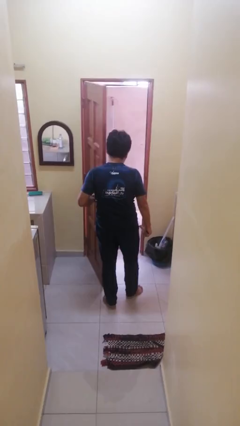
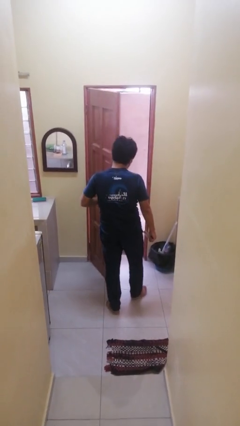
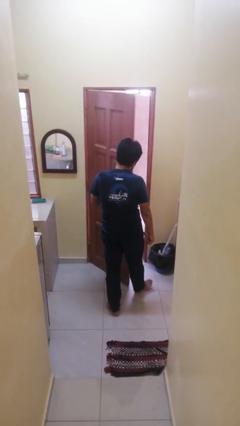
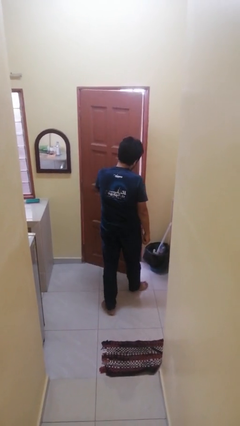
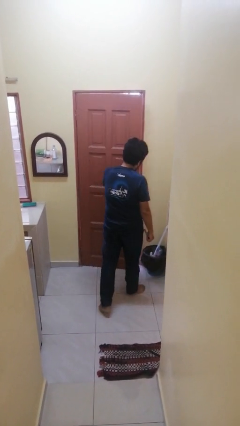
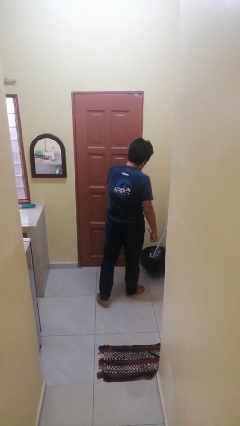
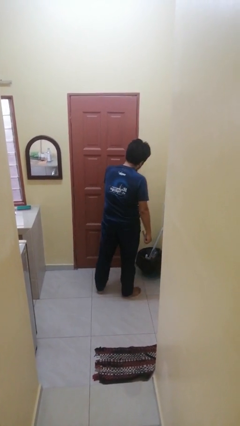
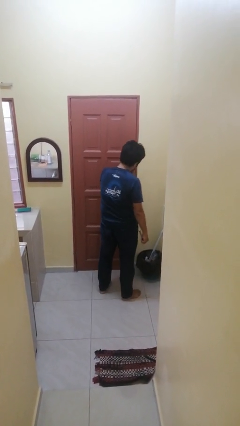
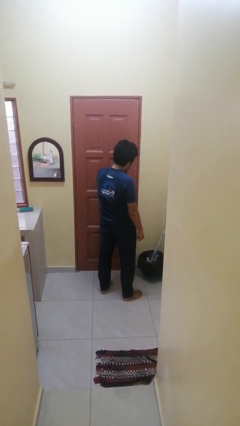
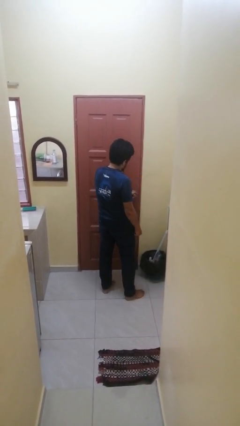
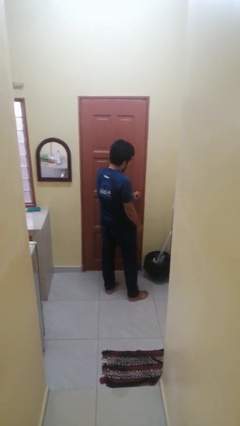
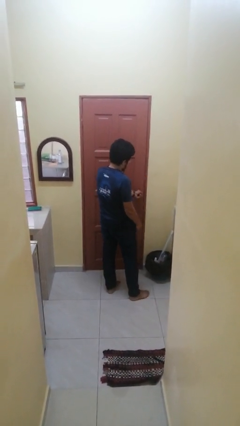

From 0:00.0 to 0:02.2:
person closes facility door

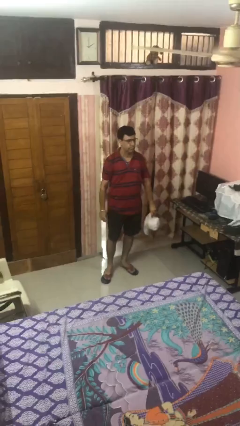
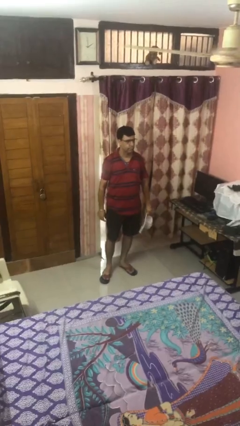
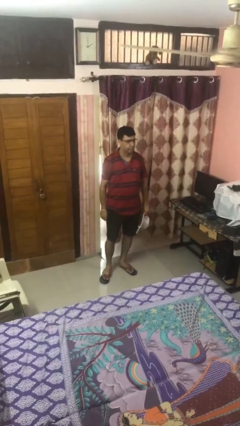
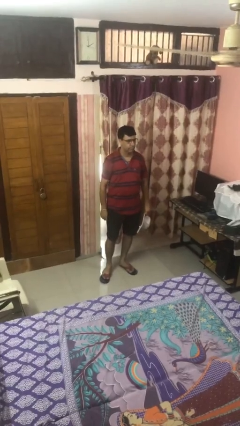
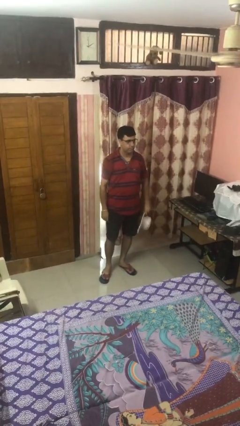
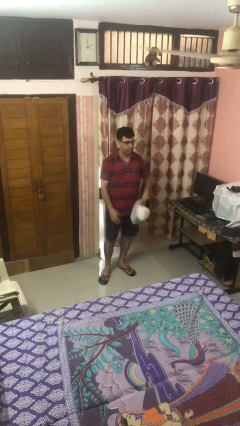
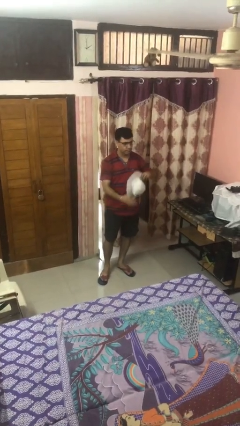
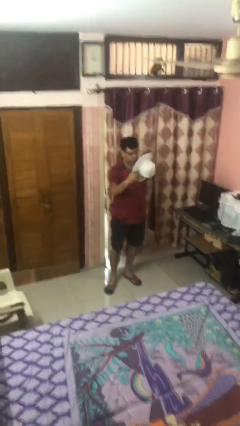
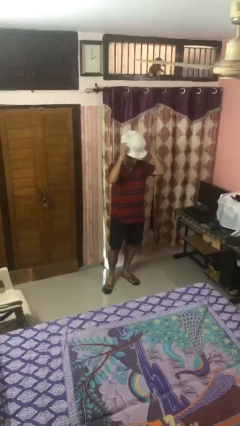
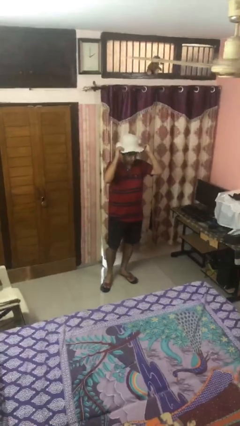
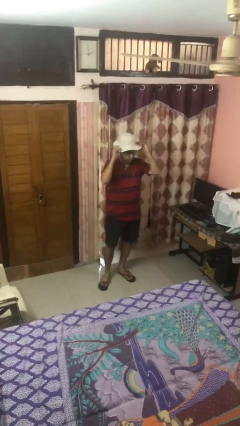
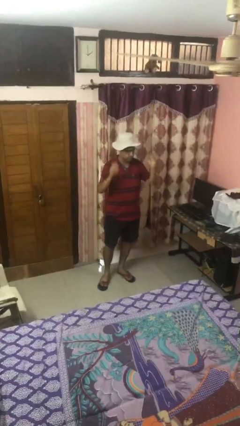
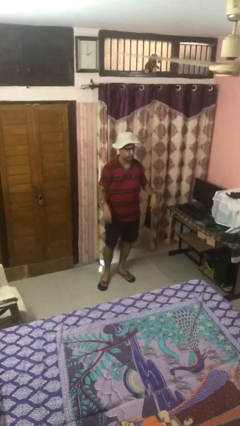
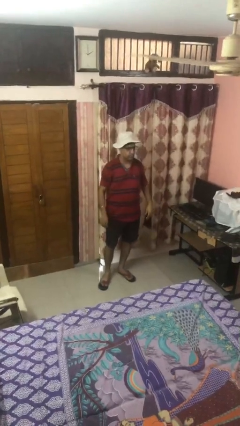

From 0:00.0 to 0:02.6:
person puts on hat

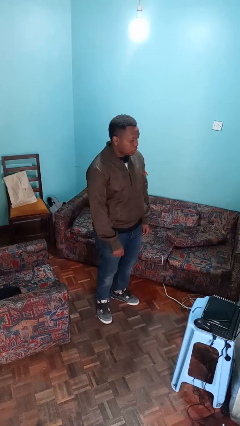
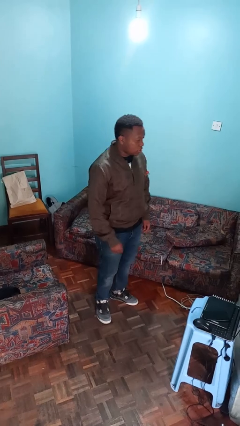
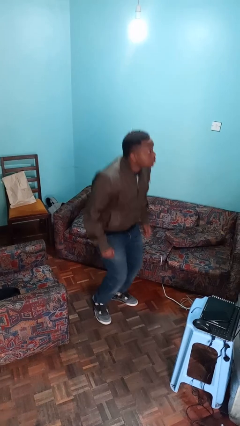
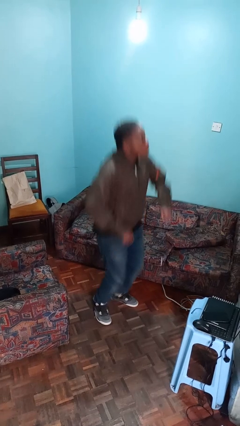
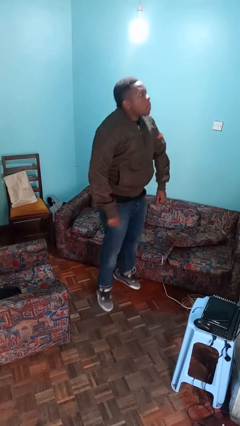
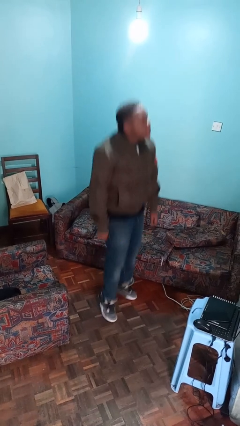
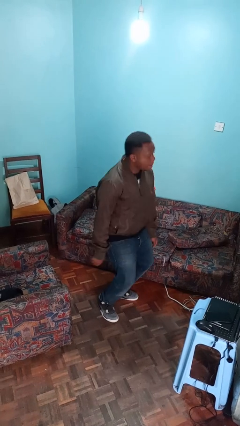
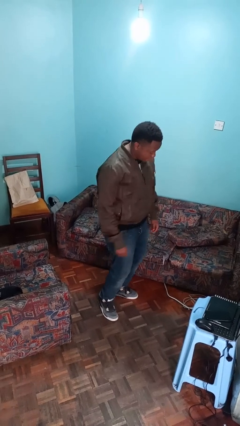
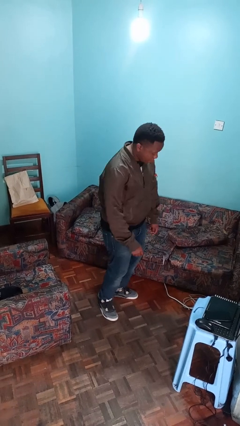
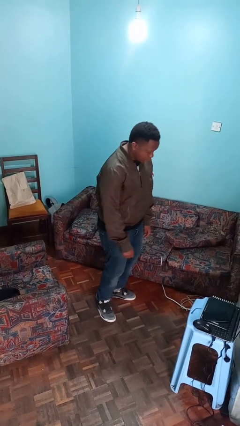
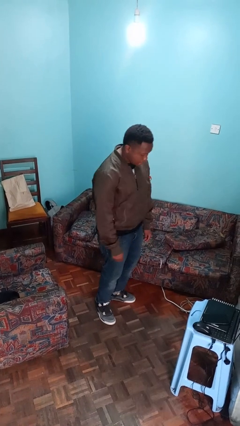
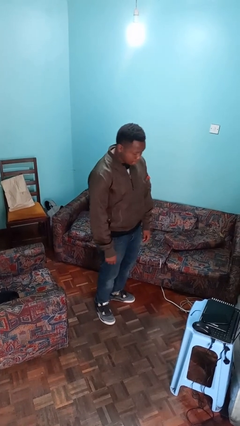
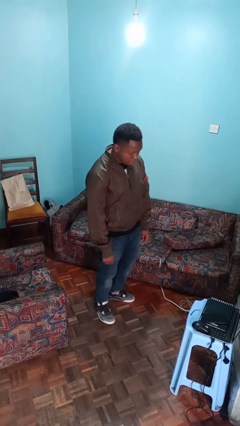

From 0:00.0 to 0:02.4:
person jumps

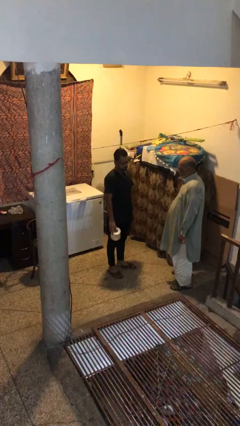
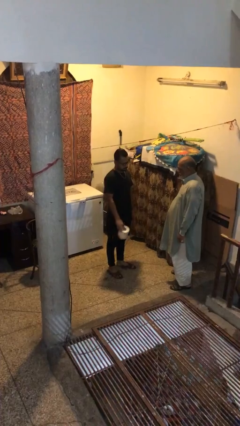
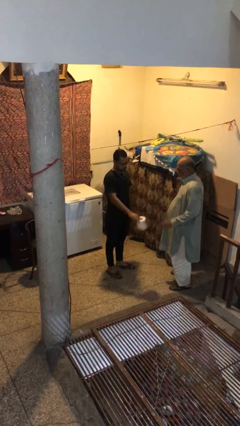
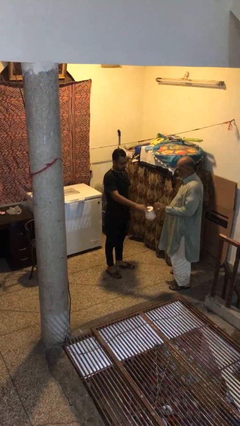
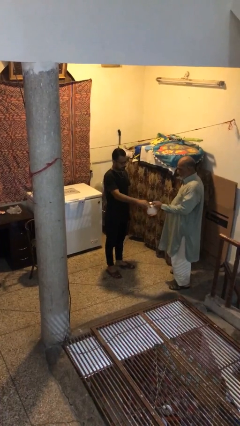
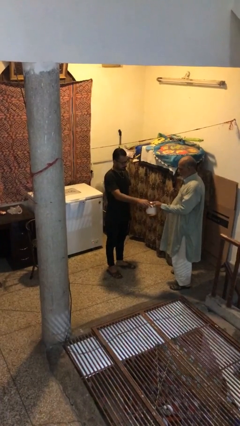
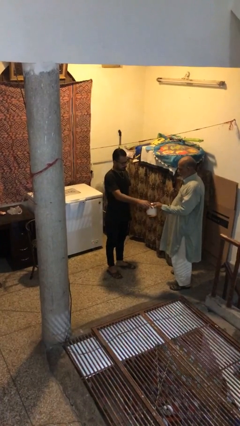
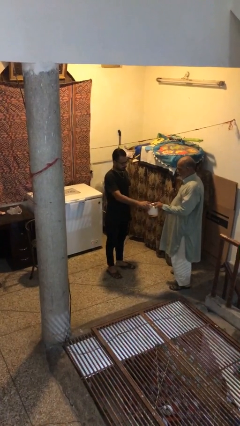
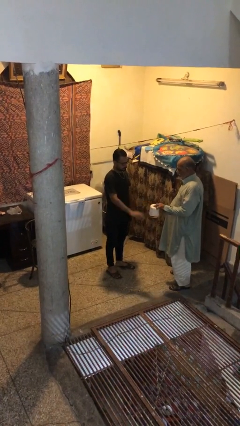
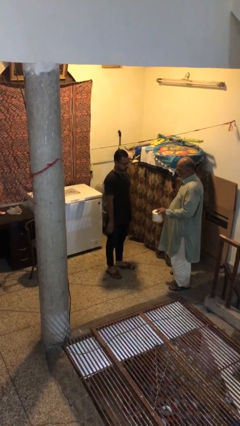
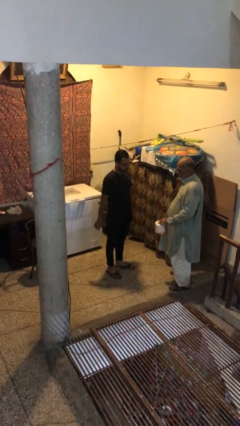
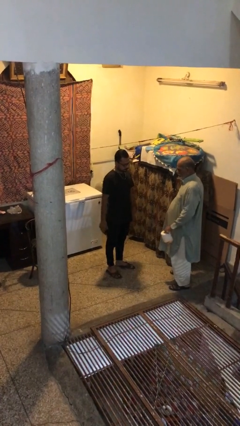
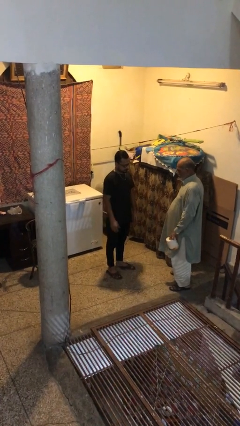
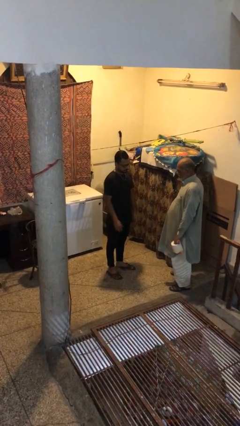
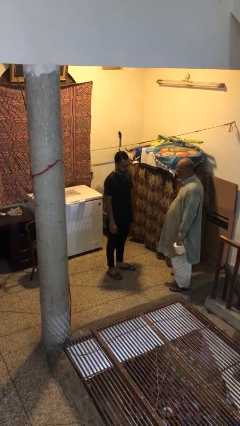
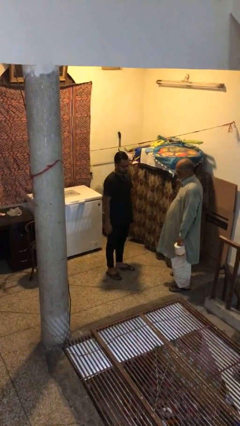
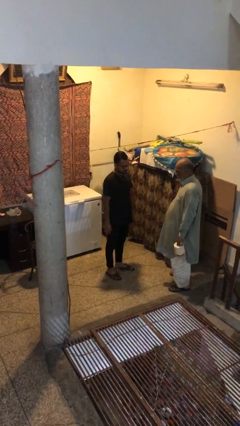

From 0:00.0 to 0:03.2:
person transfers object to person

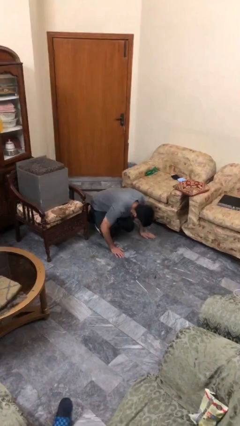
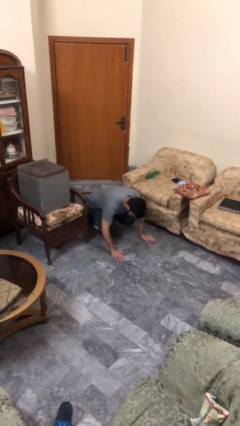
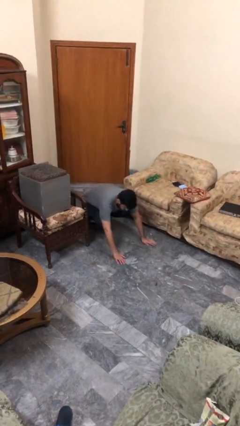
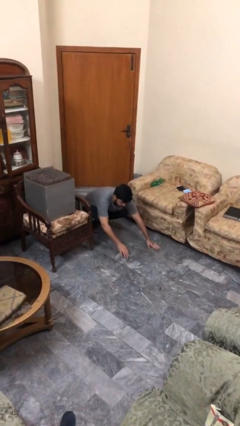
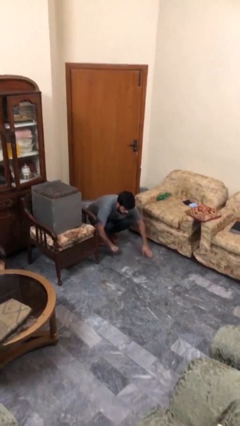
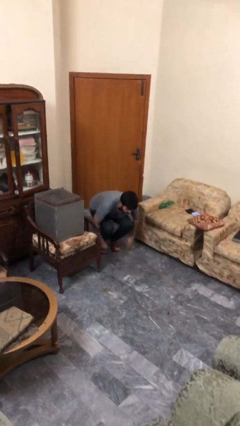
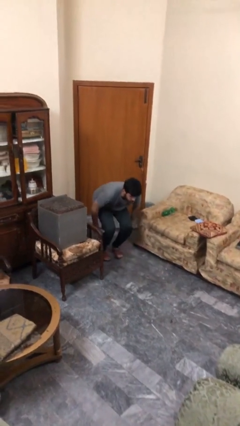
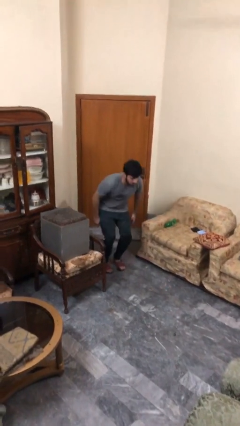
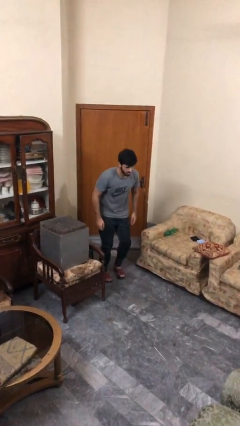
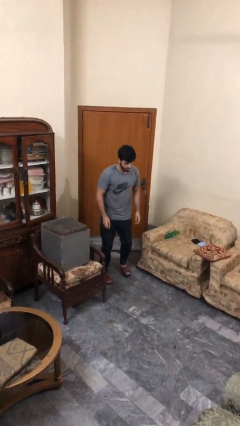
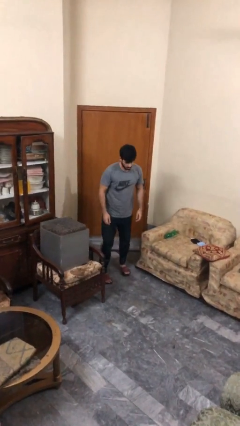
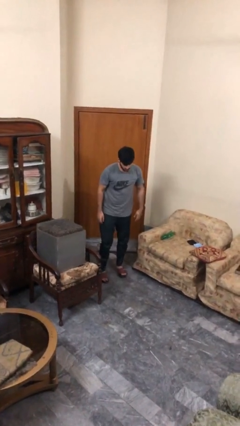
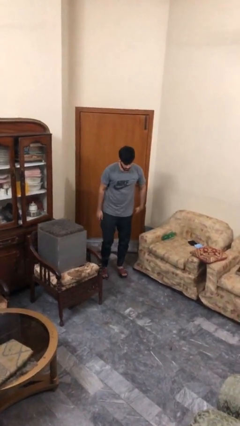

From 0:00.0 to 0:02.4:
person stands up from floor

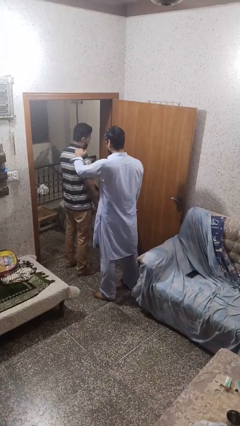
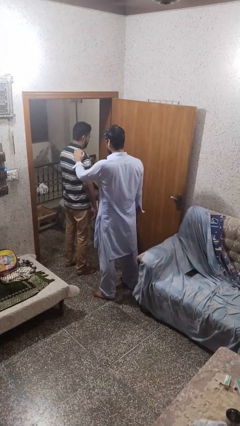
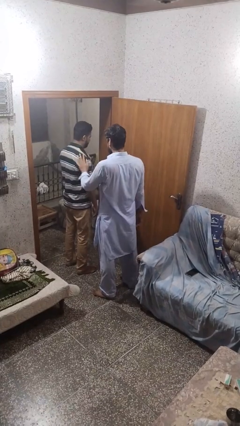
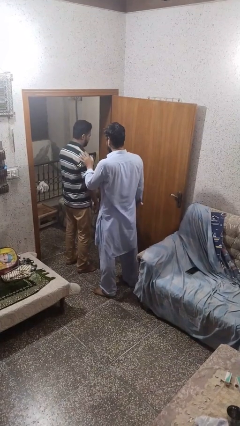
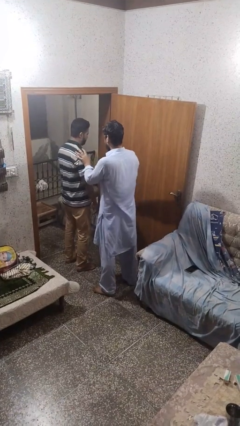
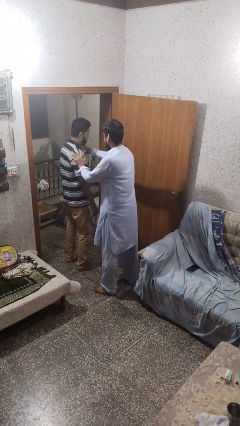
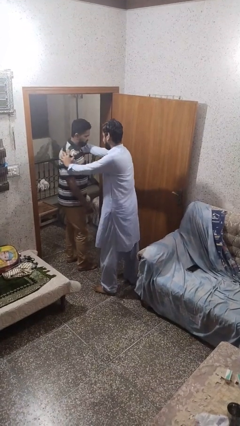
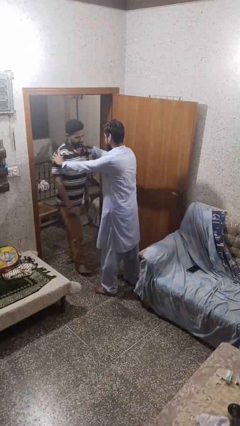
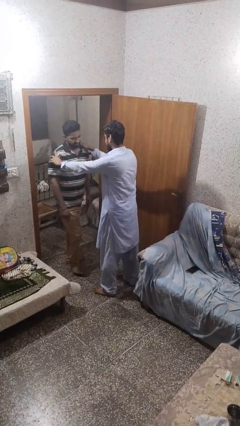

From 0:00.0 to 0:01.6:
person spins person around

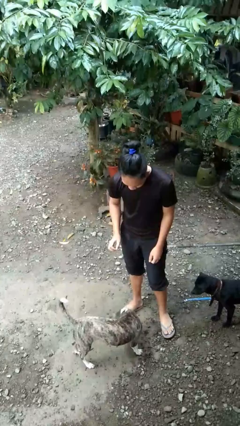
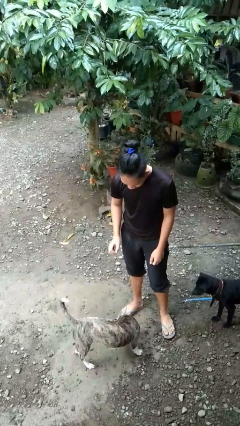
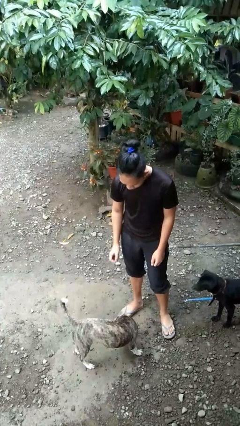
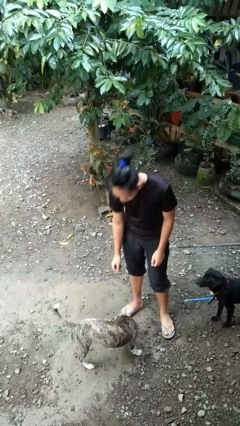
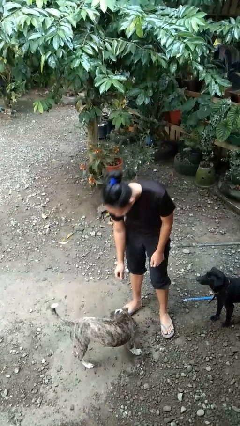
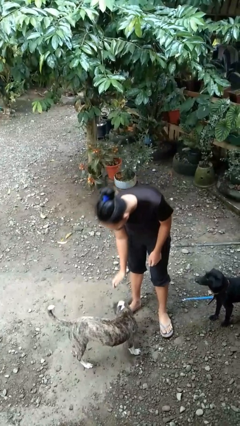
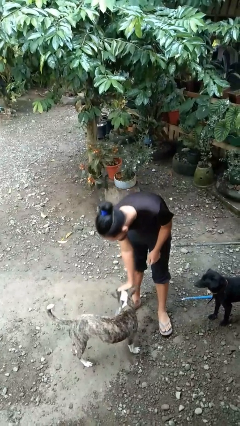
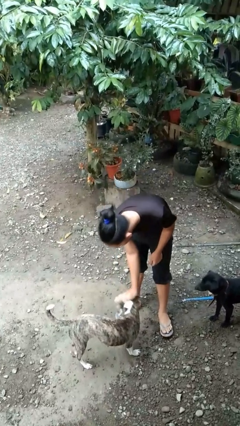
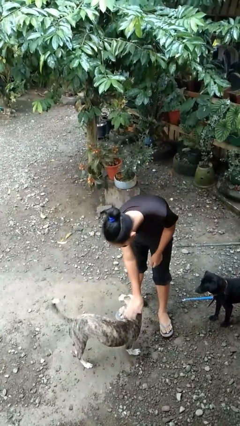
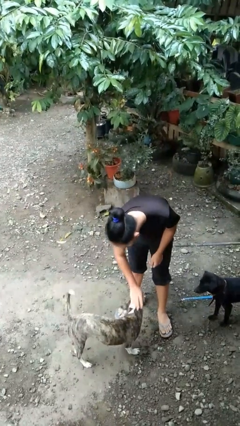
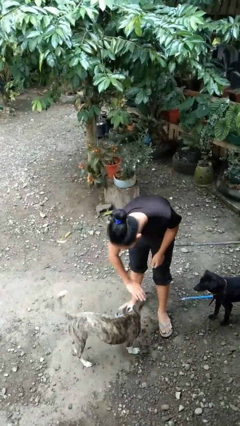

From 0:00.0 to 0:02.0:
person pets dog

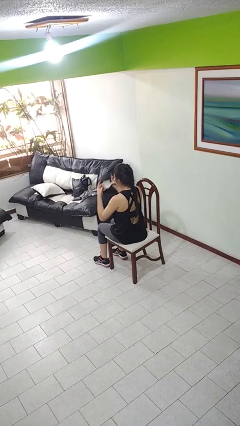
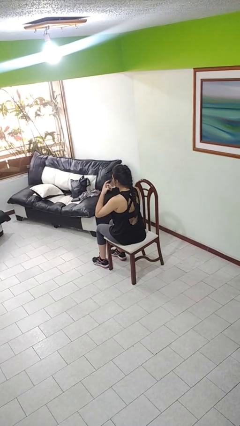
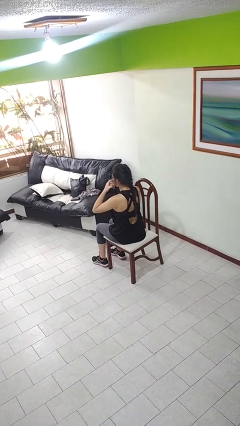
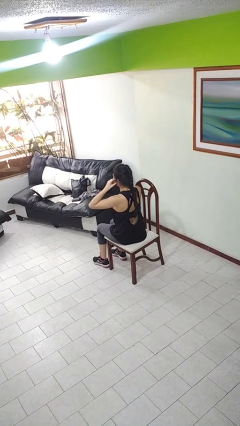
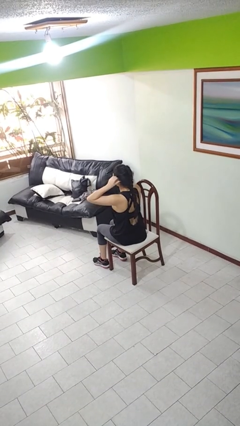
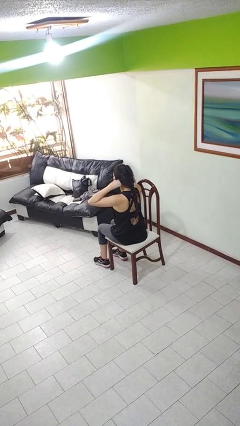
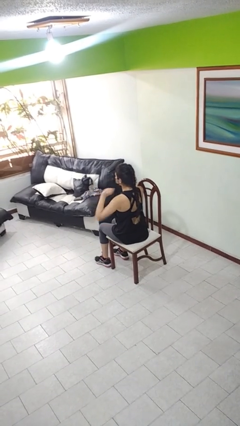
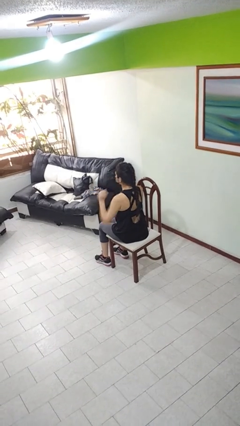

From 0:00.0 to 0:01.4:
person puts on facemask
